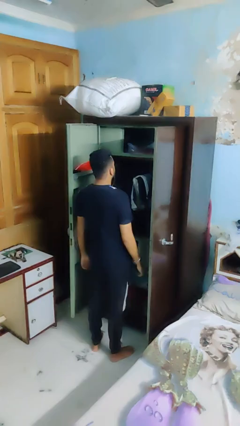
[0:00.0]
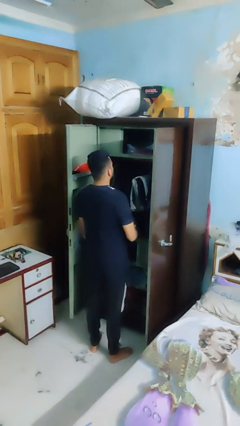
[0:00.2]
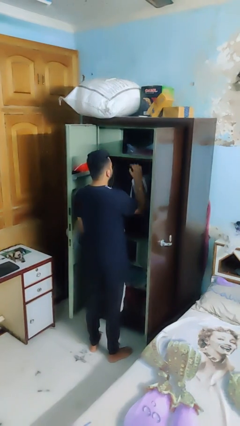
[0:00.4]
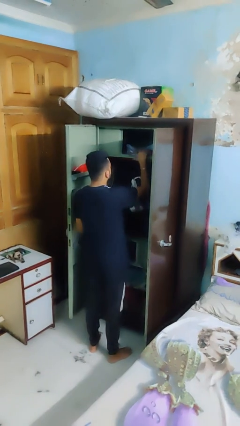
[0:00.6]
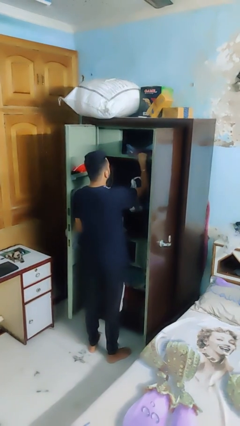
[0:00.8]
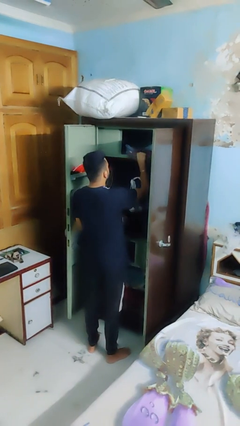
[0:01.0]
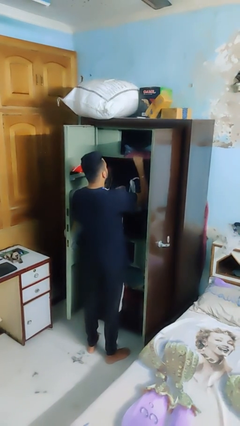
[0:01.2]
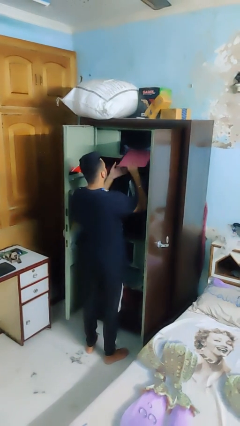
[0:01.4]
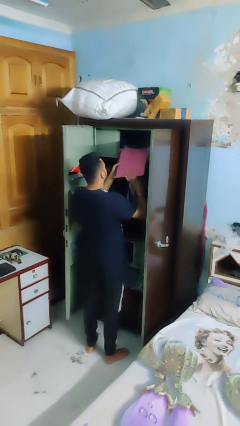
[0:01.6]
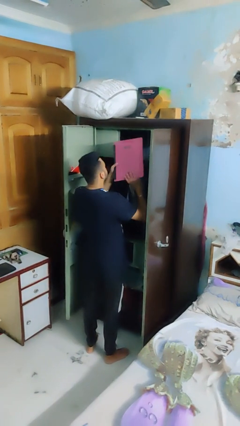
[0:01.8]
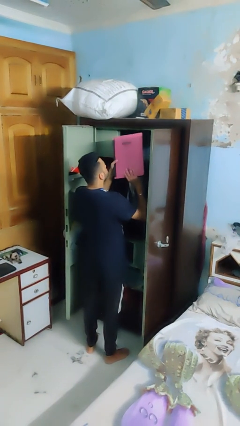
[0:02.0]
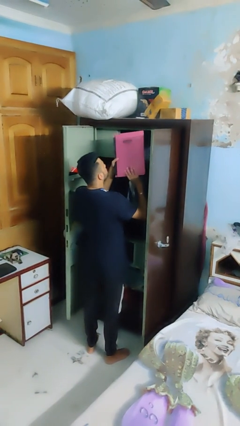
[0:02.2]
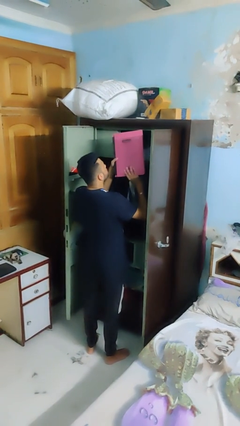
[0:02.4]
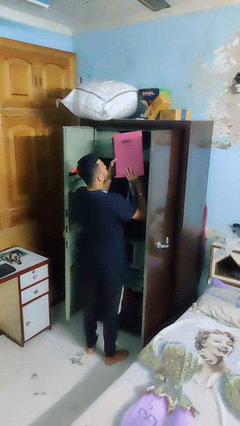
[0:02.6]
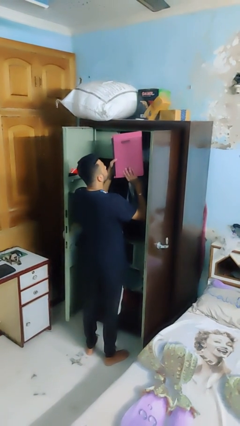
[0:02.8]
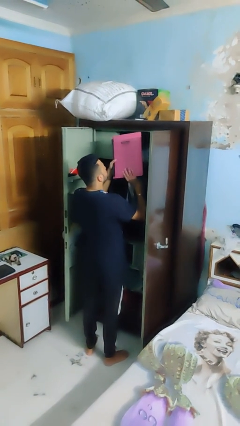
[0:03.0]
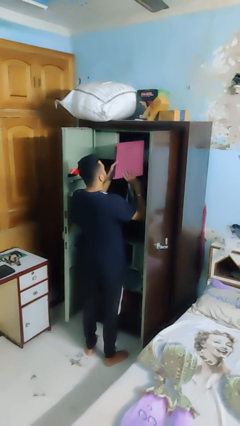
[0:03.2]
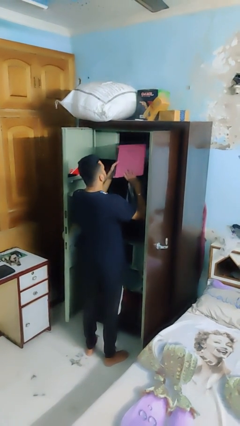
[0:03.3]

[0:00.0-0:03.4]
person picks up object from shelf

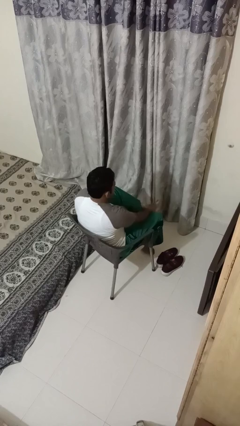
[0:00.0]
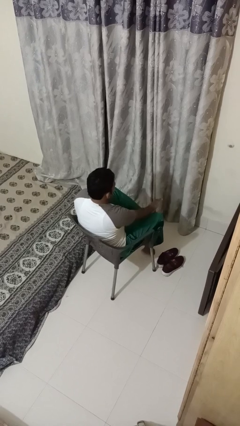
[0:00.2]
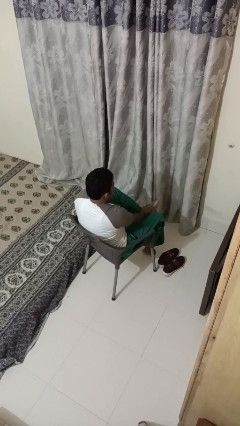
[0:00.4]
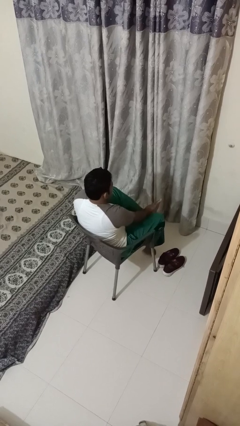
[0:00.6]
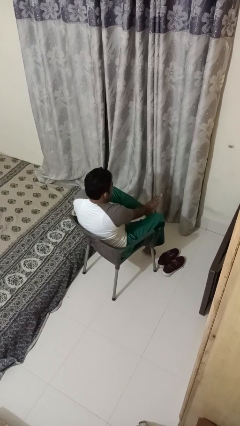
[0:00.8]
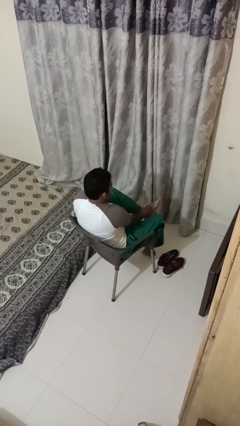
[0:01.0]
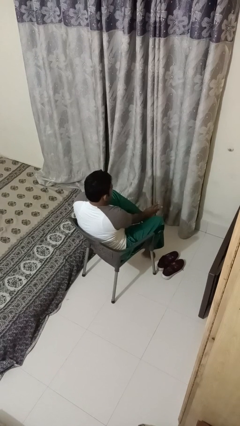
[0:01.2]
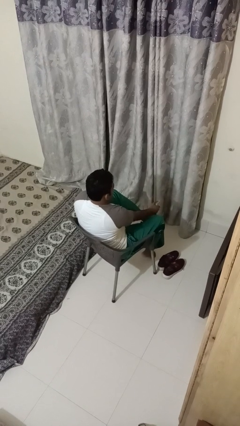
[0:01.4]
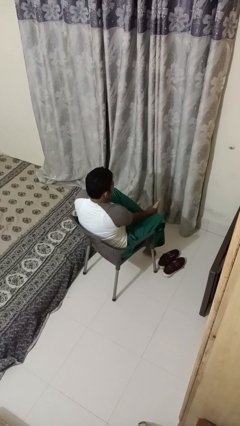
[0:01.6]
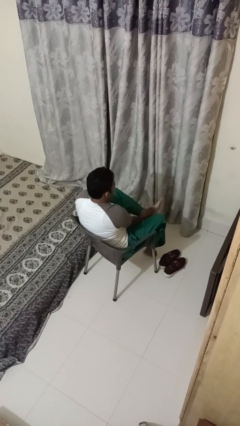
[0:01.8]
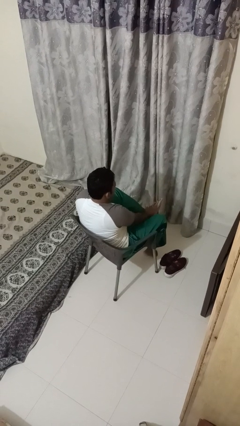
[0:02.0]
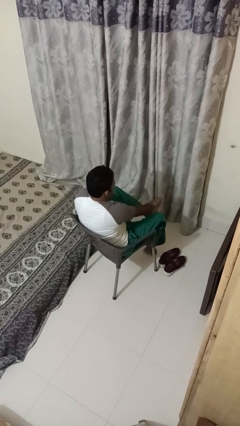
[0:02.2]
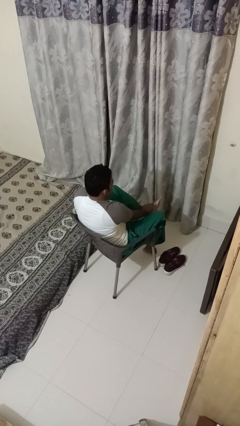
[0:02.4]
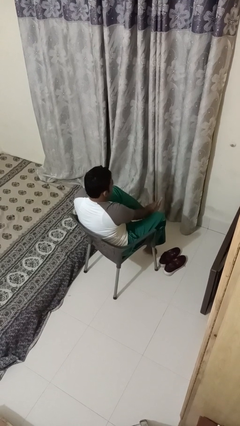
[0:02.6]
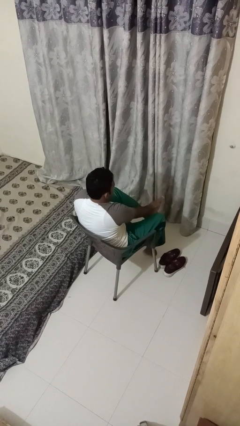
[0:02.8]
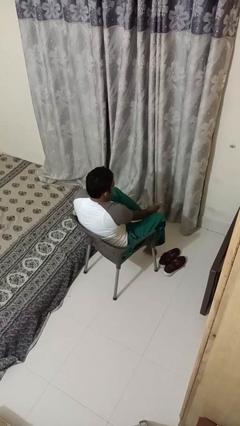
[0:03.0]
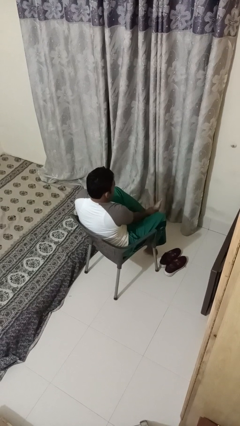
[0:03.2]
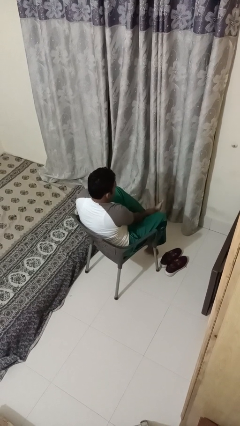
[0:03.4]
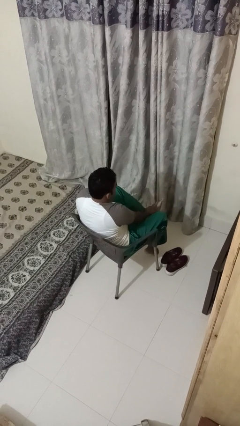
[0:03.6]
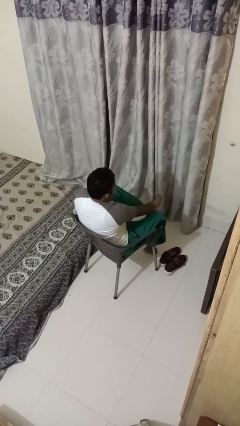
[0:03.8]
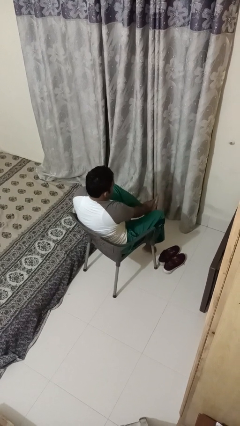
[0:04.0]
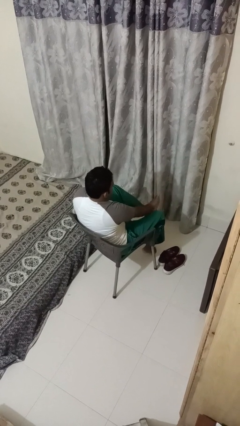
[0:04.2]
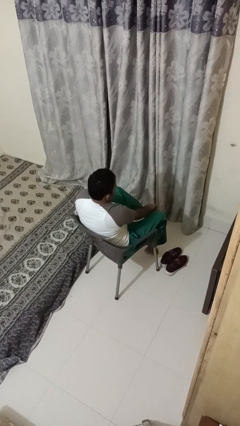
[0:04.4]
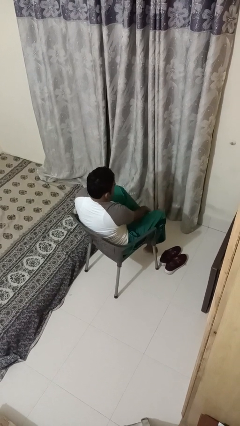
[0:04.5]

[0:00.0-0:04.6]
person rubs foot

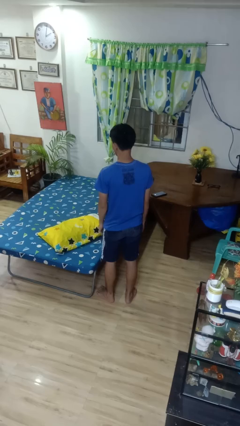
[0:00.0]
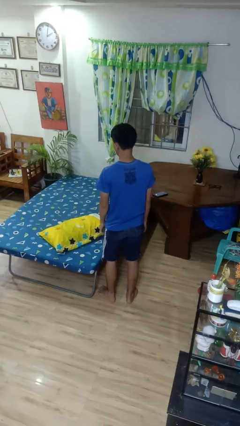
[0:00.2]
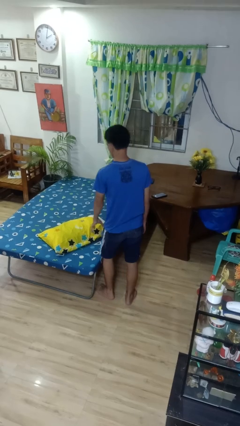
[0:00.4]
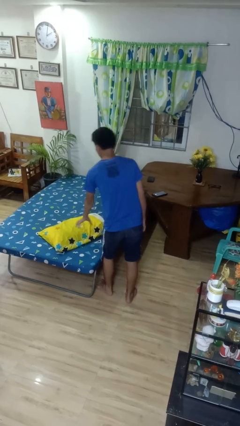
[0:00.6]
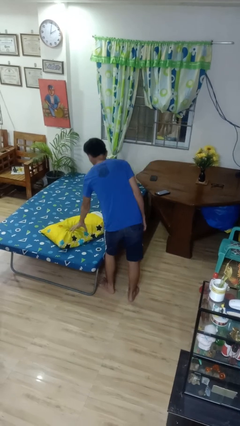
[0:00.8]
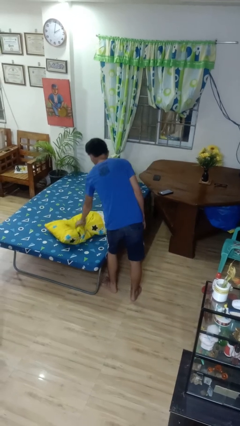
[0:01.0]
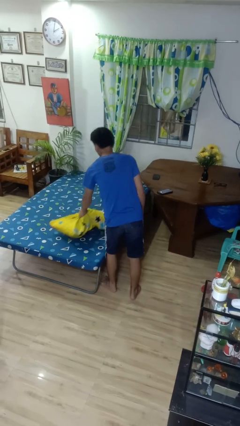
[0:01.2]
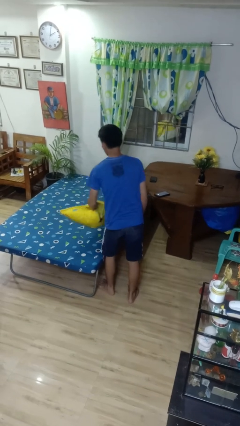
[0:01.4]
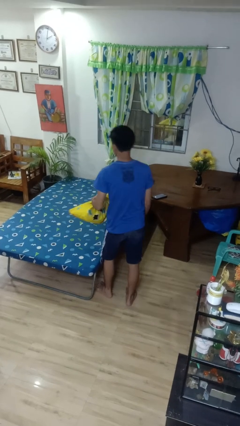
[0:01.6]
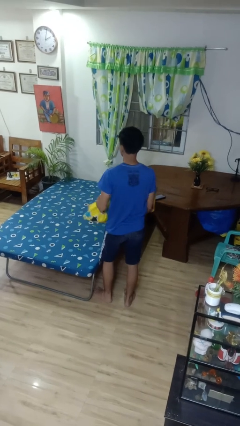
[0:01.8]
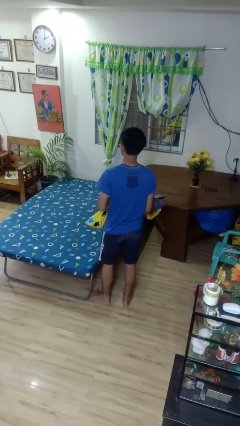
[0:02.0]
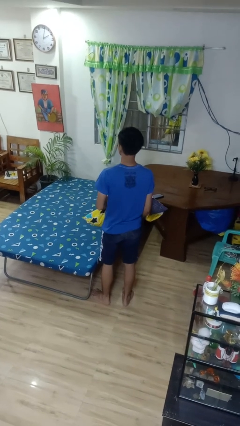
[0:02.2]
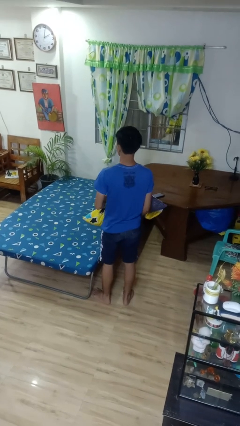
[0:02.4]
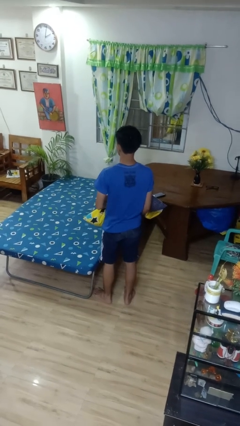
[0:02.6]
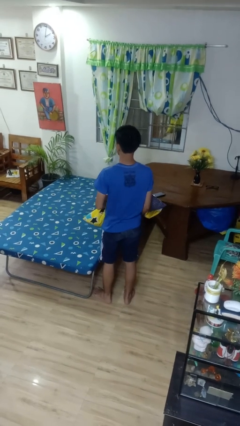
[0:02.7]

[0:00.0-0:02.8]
person picks up object from bed

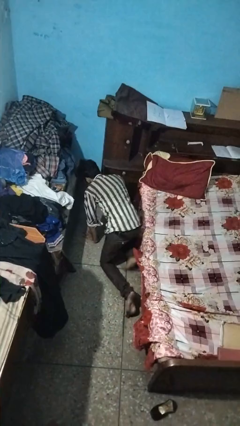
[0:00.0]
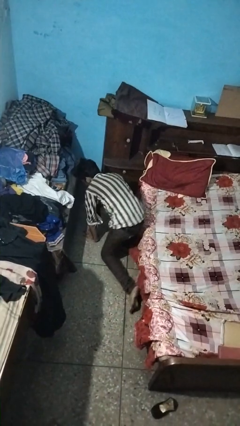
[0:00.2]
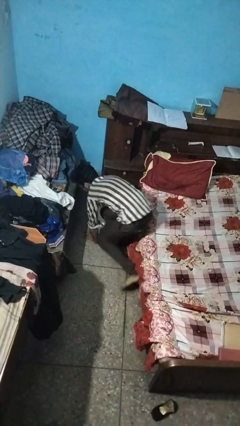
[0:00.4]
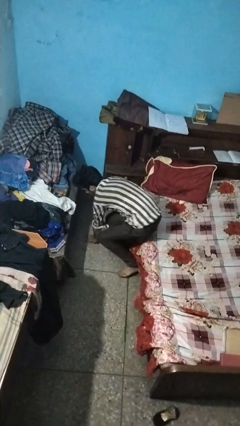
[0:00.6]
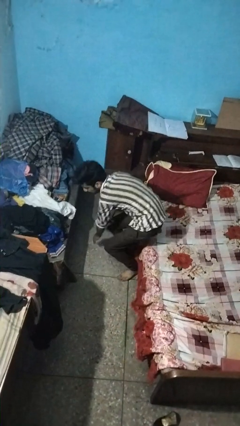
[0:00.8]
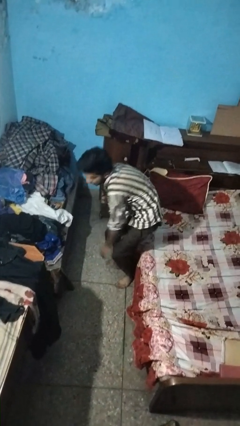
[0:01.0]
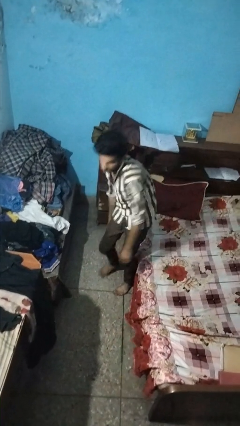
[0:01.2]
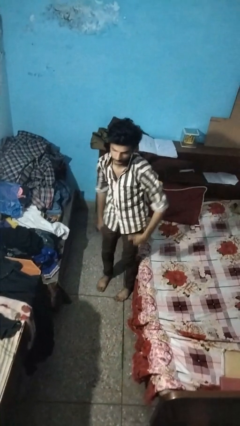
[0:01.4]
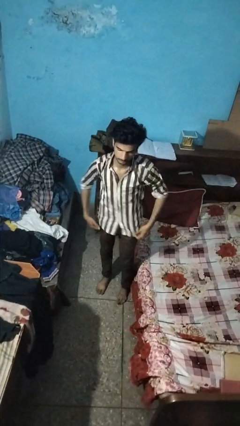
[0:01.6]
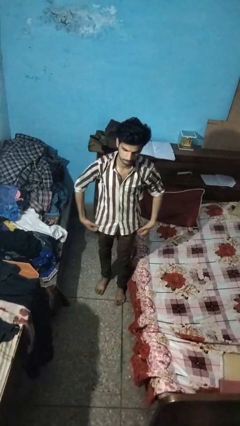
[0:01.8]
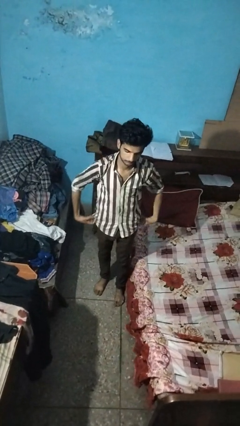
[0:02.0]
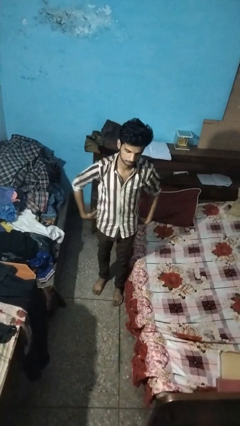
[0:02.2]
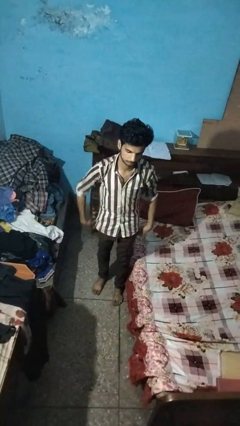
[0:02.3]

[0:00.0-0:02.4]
person stands up from floor

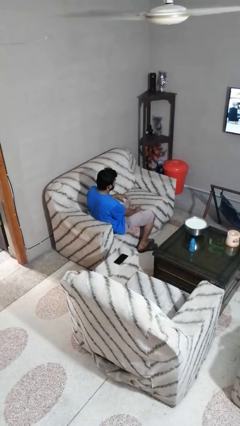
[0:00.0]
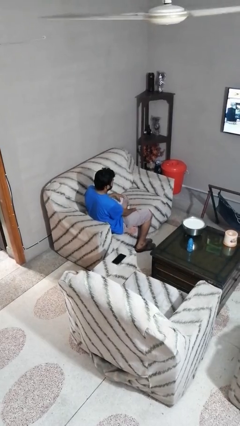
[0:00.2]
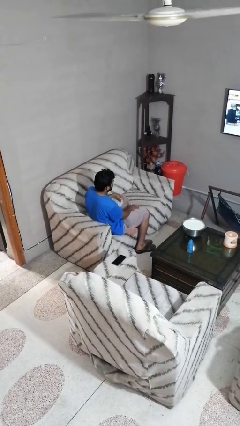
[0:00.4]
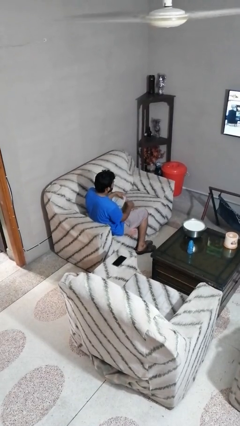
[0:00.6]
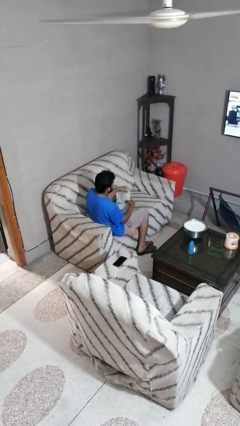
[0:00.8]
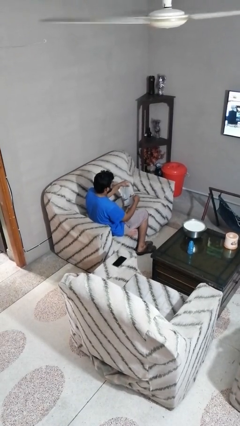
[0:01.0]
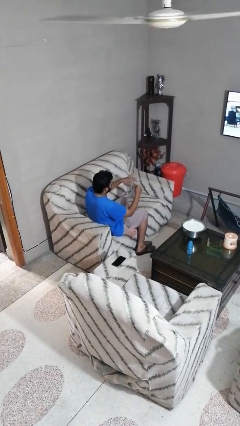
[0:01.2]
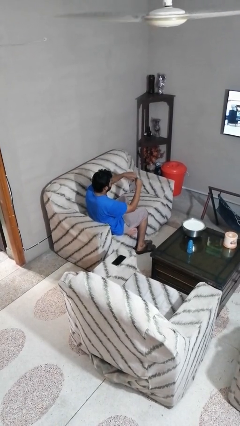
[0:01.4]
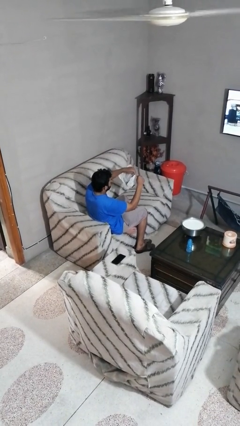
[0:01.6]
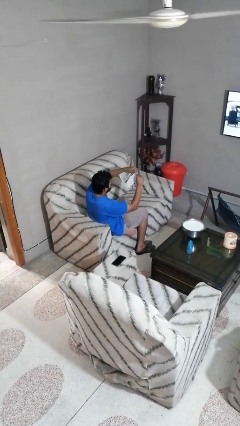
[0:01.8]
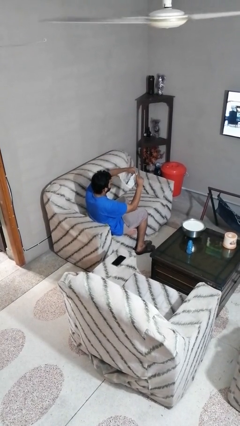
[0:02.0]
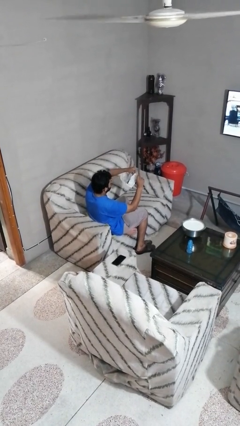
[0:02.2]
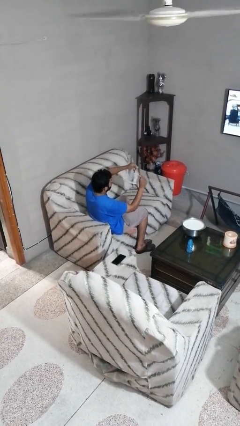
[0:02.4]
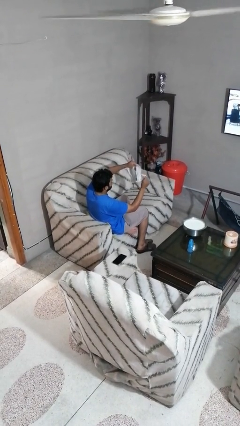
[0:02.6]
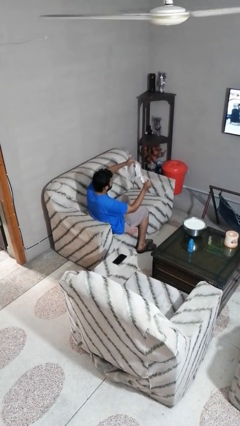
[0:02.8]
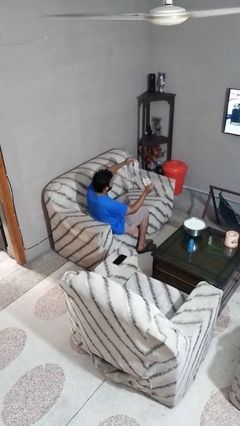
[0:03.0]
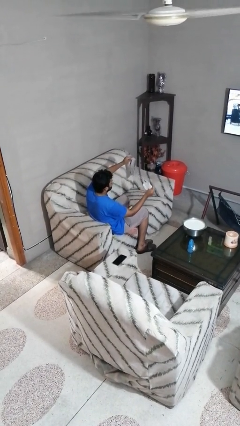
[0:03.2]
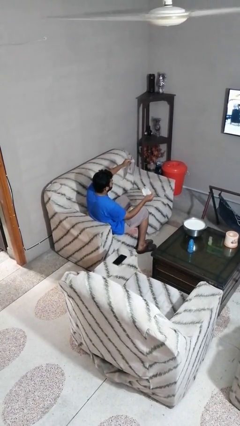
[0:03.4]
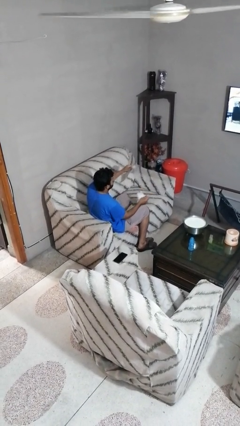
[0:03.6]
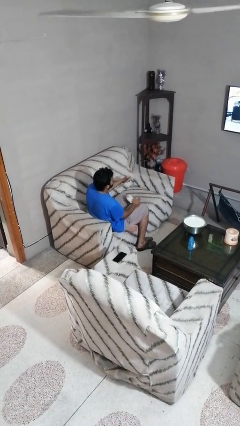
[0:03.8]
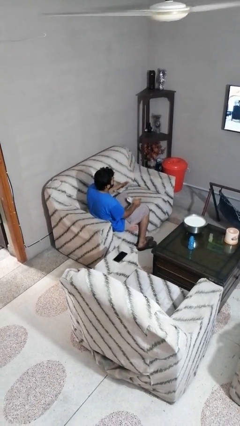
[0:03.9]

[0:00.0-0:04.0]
person tears paper
